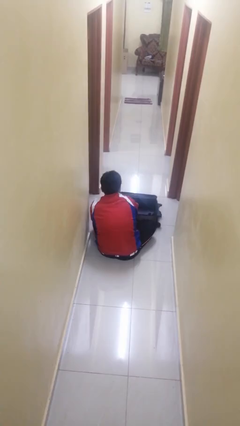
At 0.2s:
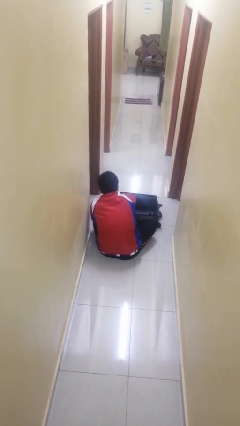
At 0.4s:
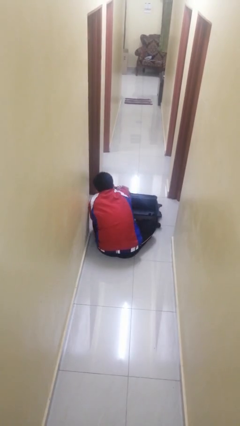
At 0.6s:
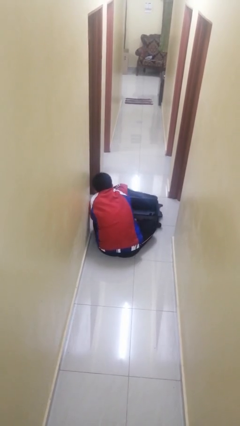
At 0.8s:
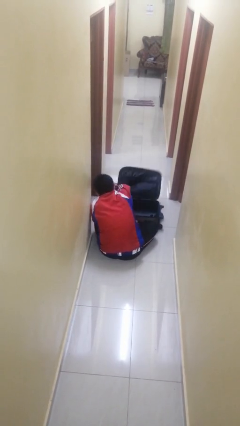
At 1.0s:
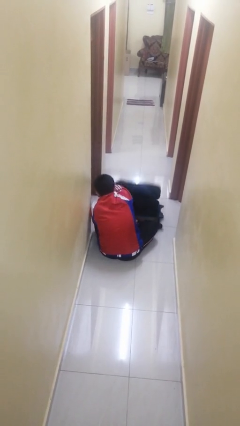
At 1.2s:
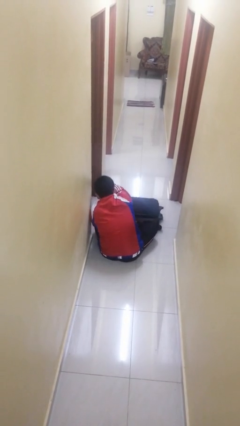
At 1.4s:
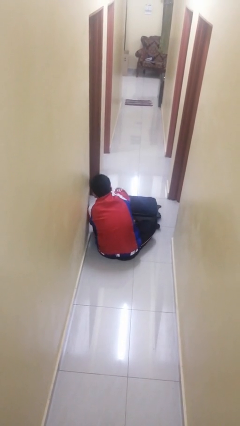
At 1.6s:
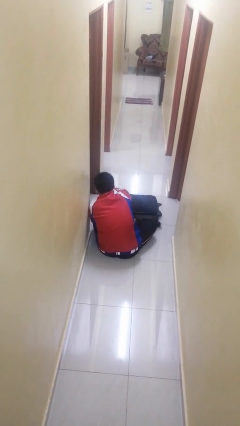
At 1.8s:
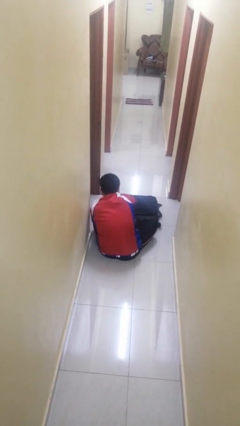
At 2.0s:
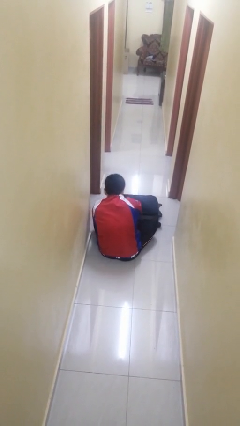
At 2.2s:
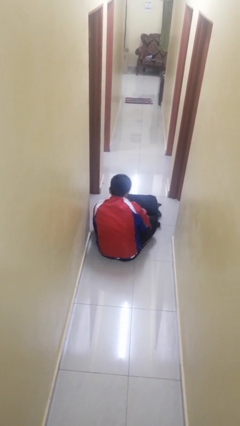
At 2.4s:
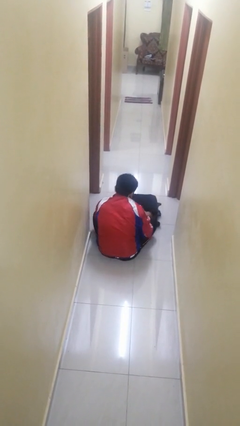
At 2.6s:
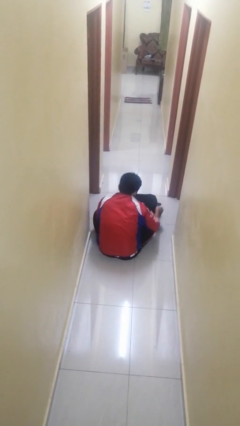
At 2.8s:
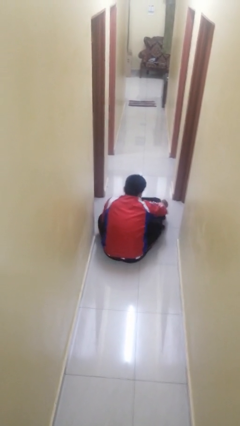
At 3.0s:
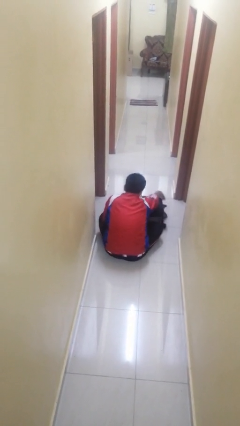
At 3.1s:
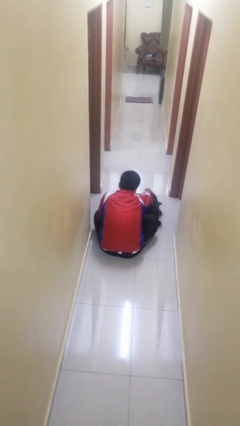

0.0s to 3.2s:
person closes suitcase

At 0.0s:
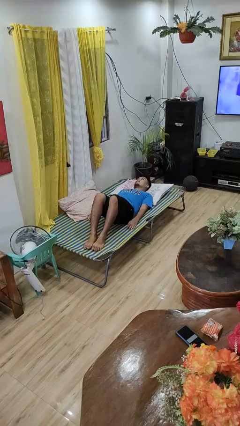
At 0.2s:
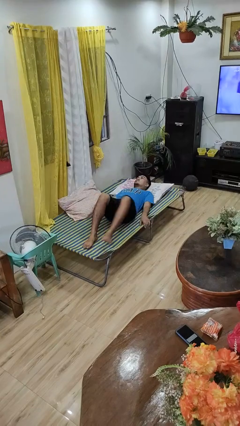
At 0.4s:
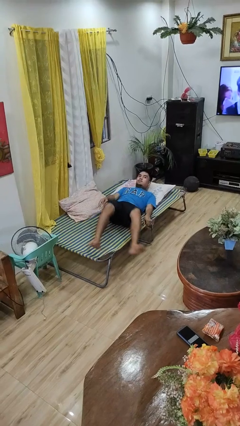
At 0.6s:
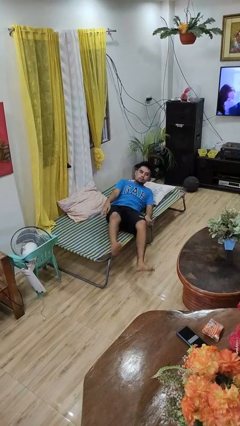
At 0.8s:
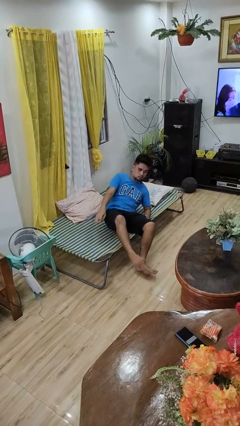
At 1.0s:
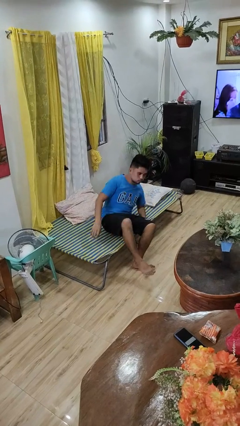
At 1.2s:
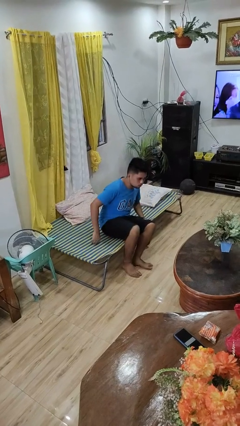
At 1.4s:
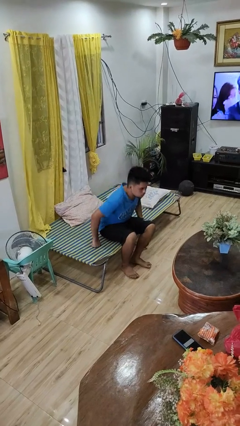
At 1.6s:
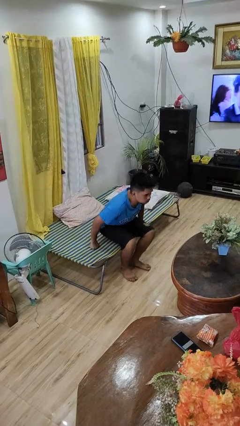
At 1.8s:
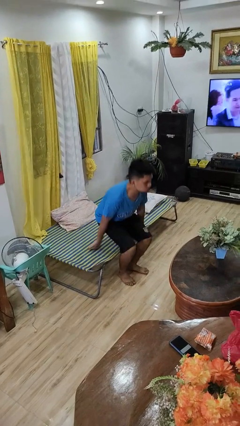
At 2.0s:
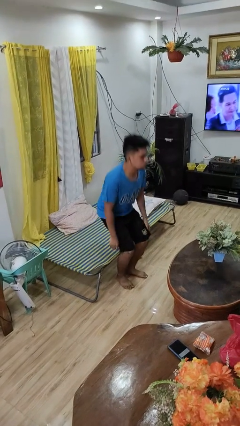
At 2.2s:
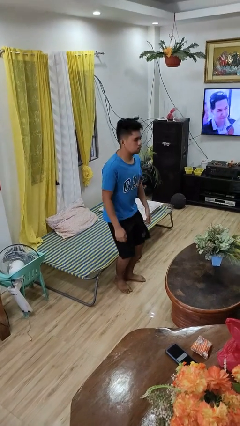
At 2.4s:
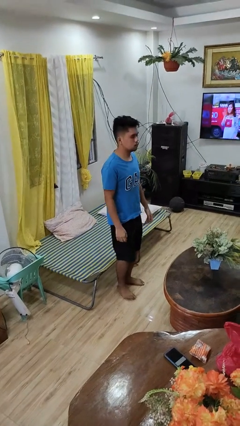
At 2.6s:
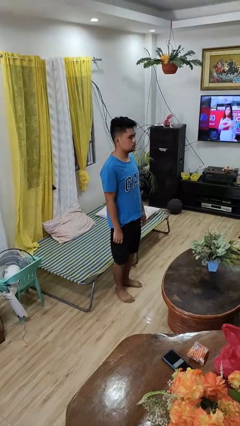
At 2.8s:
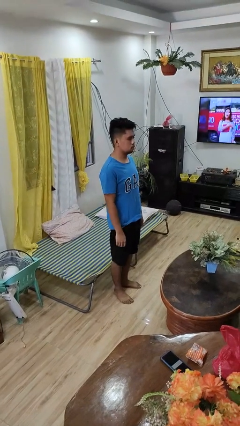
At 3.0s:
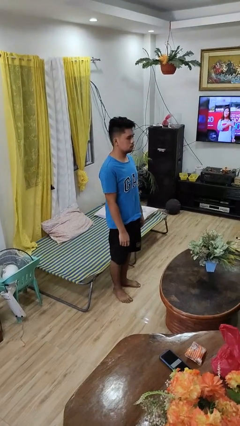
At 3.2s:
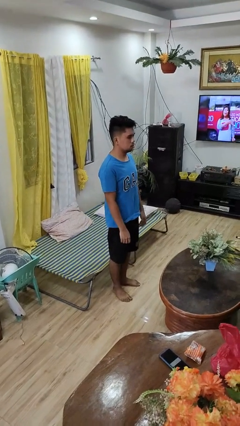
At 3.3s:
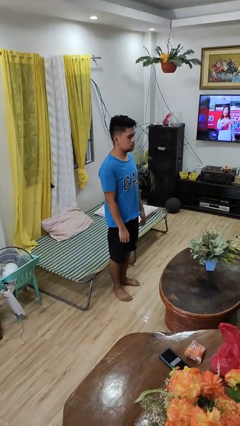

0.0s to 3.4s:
person stands up

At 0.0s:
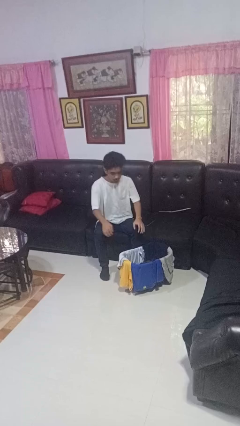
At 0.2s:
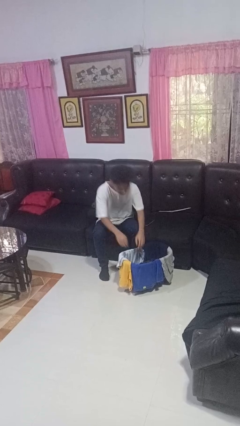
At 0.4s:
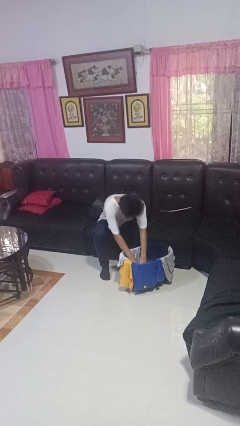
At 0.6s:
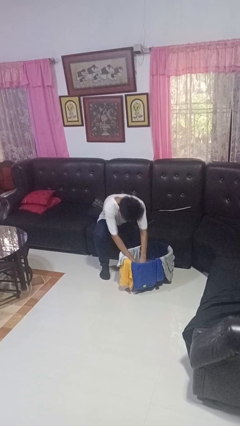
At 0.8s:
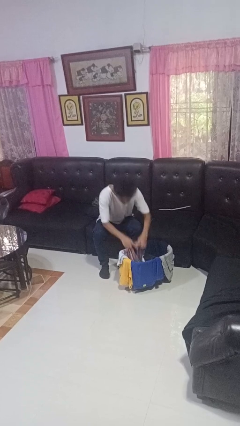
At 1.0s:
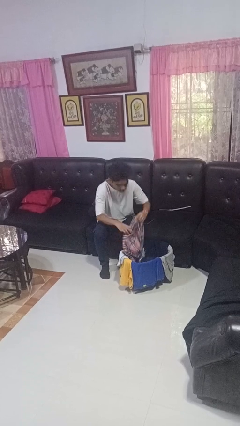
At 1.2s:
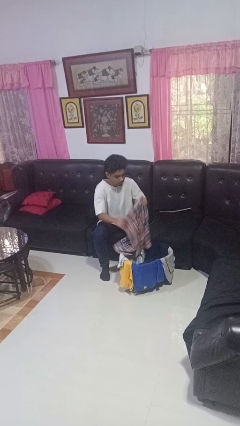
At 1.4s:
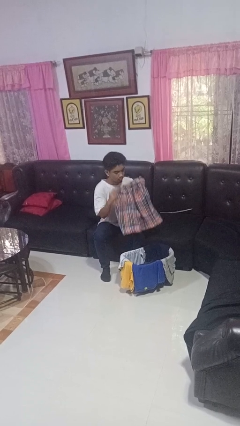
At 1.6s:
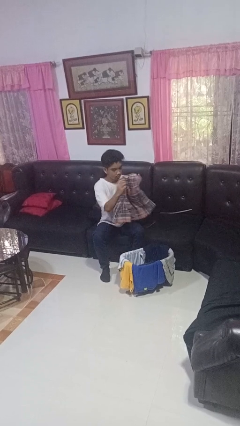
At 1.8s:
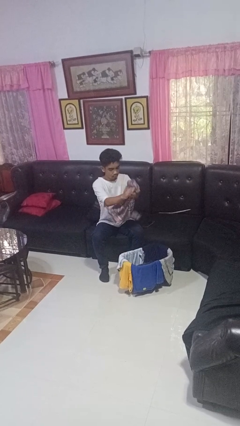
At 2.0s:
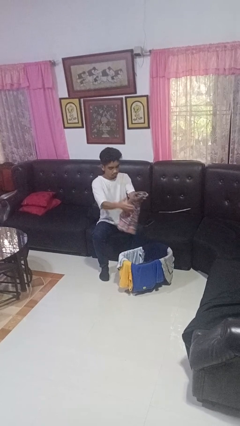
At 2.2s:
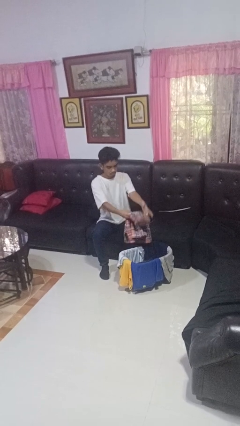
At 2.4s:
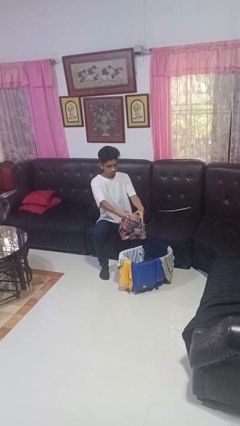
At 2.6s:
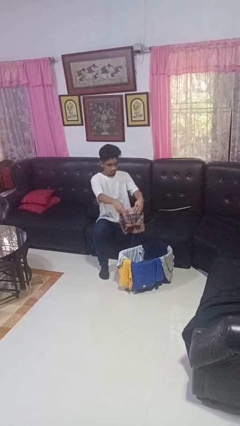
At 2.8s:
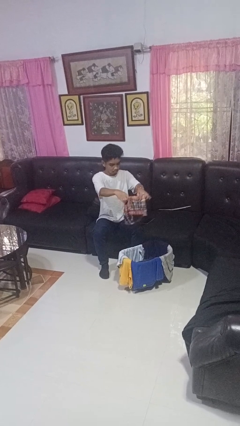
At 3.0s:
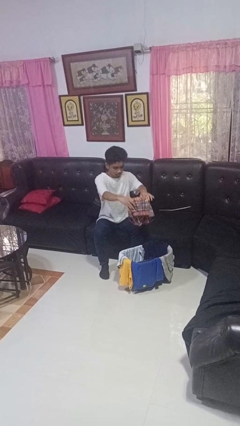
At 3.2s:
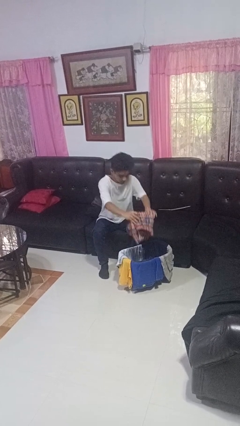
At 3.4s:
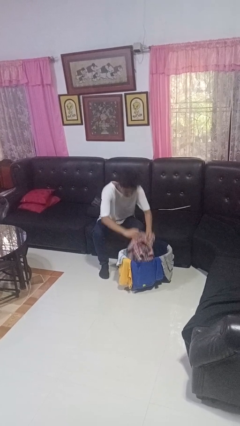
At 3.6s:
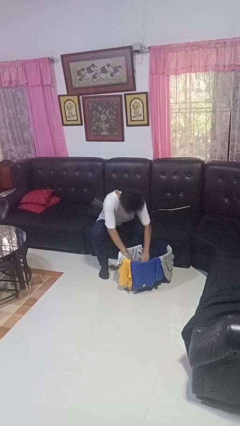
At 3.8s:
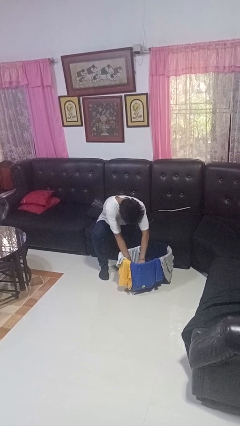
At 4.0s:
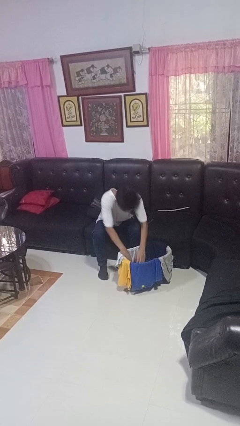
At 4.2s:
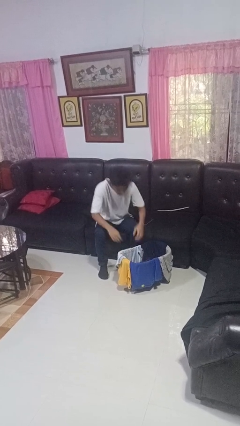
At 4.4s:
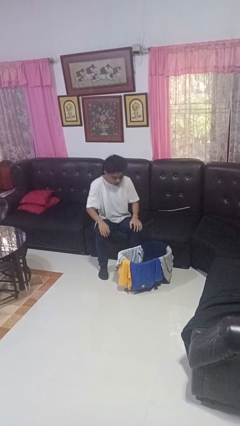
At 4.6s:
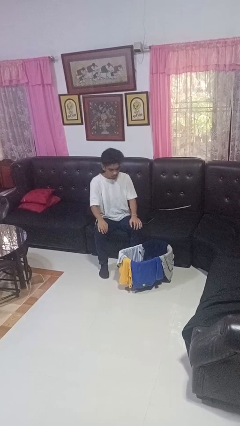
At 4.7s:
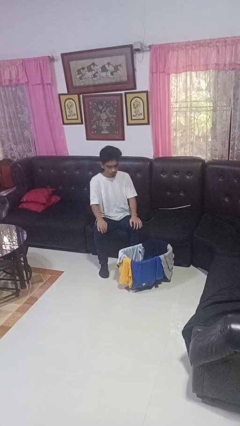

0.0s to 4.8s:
person folds pants

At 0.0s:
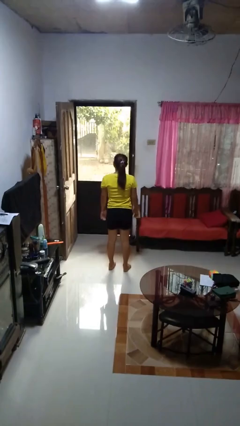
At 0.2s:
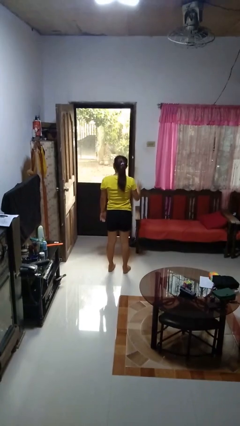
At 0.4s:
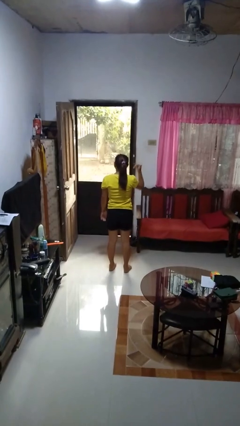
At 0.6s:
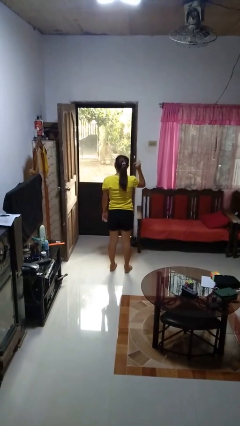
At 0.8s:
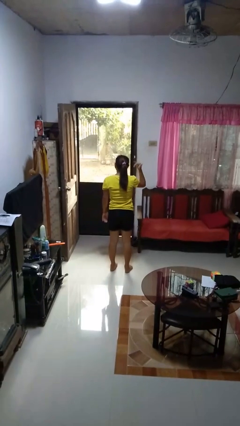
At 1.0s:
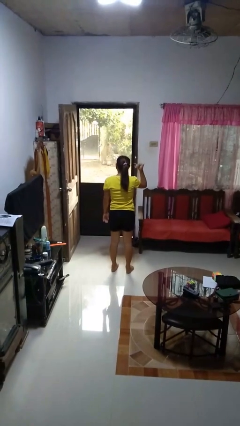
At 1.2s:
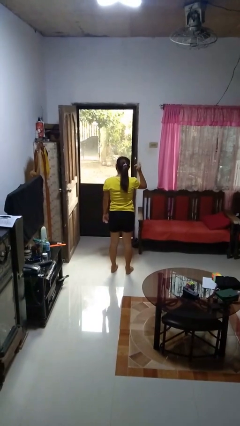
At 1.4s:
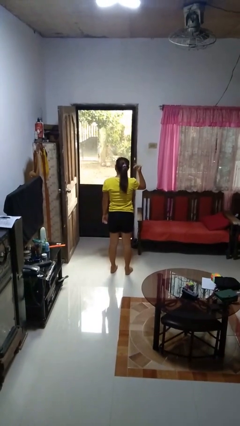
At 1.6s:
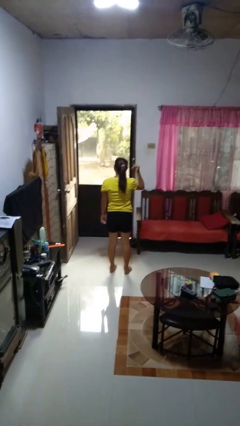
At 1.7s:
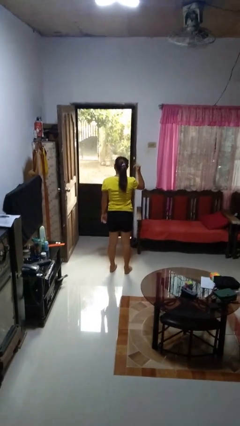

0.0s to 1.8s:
person gestures hang loose

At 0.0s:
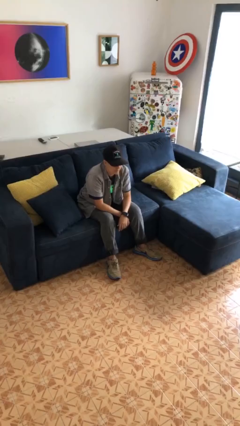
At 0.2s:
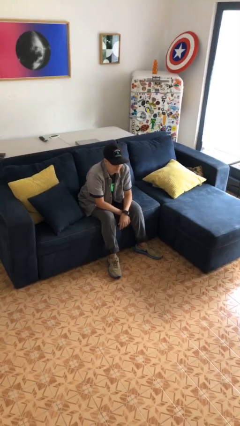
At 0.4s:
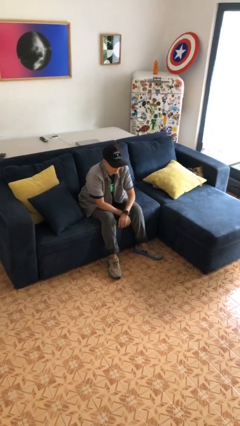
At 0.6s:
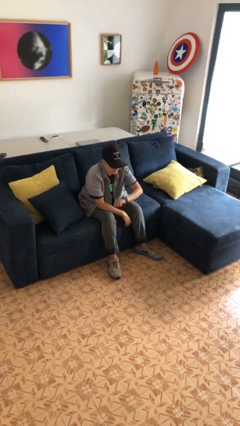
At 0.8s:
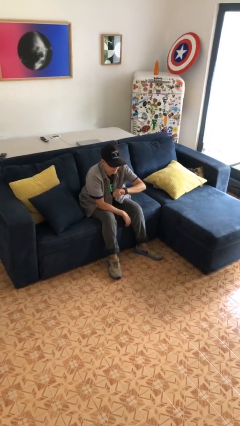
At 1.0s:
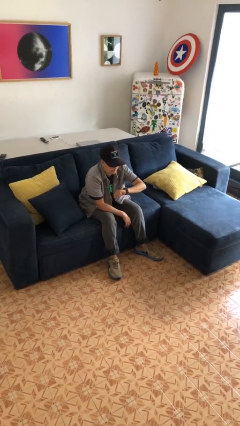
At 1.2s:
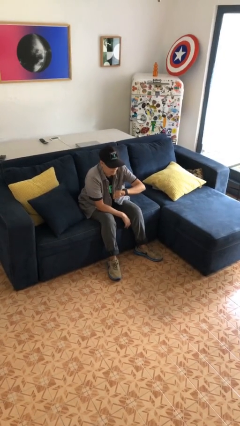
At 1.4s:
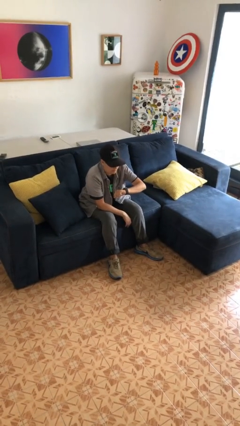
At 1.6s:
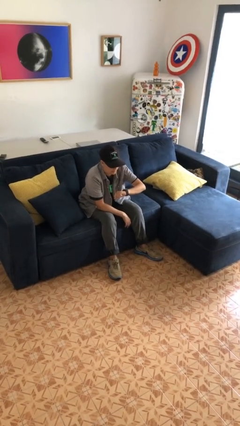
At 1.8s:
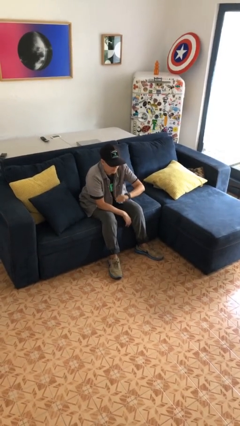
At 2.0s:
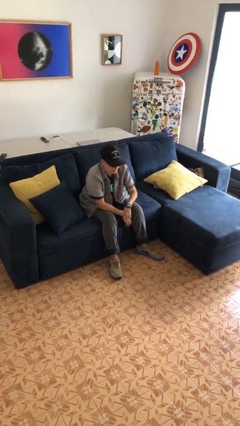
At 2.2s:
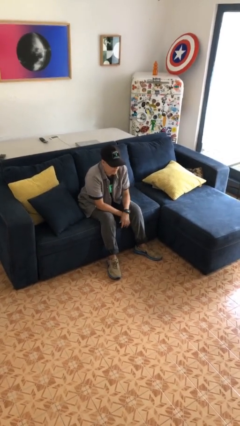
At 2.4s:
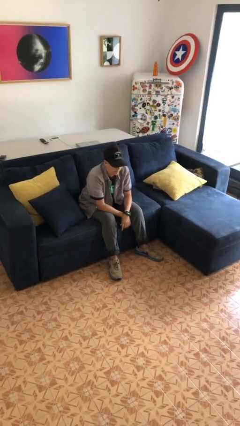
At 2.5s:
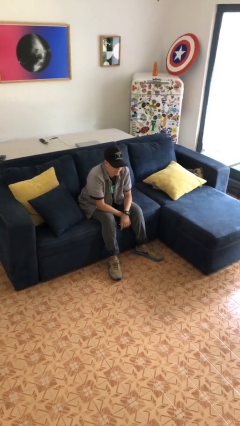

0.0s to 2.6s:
person looks at wristwatch

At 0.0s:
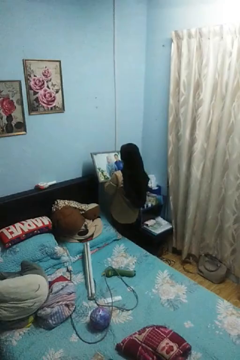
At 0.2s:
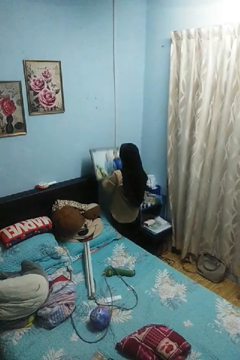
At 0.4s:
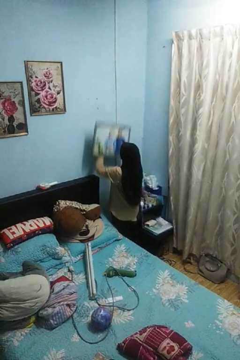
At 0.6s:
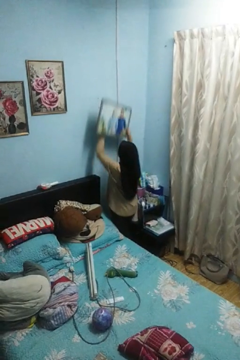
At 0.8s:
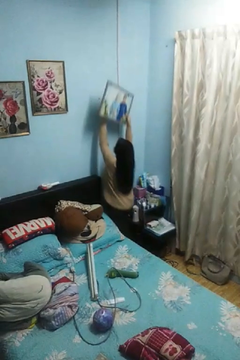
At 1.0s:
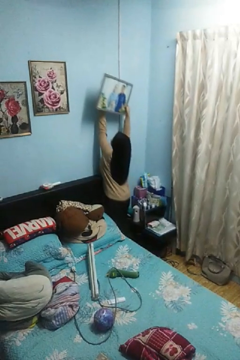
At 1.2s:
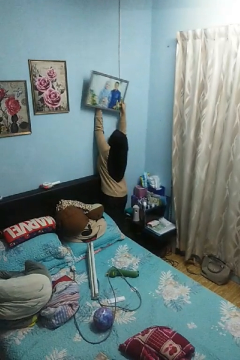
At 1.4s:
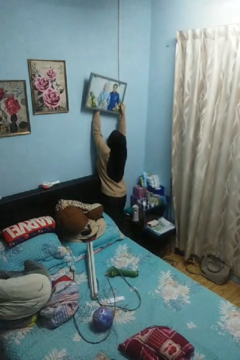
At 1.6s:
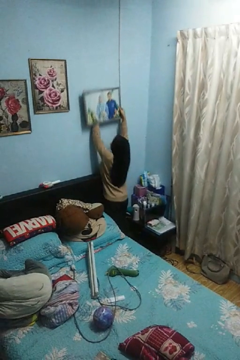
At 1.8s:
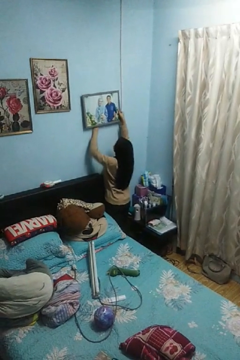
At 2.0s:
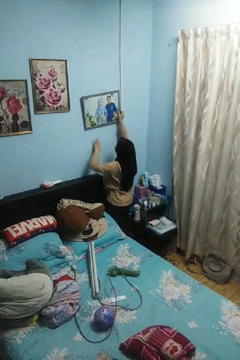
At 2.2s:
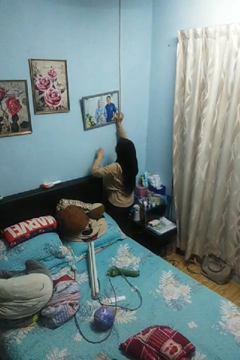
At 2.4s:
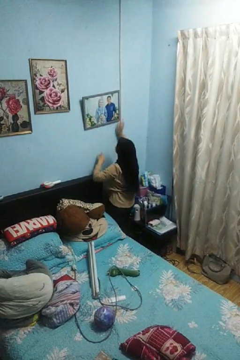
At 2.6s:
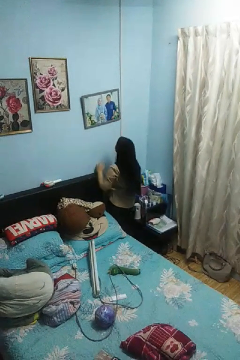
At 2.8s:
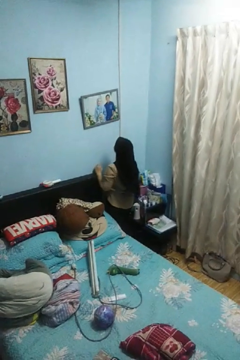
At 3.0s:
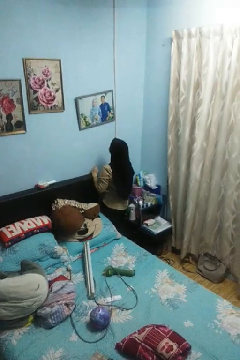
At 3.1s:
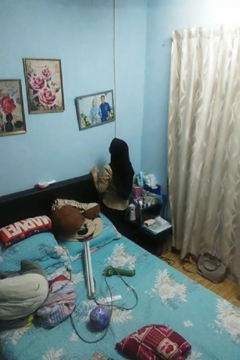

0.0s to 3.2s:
person puts up picture frame
